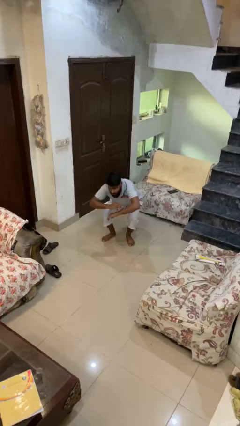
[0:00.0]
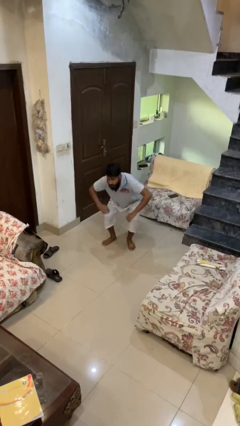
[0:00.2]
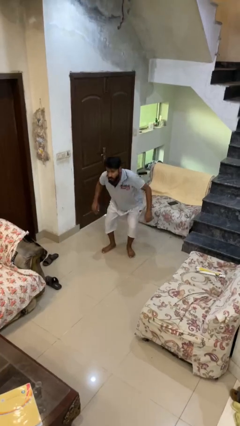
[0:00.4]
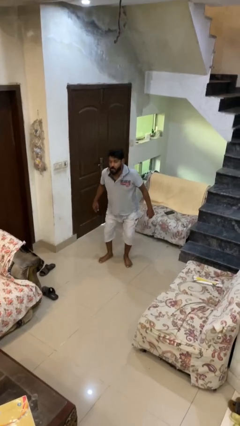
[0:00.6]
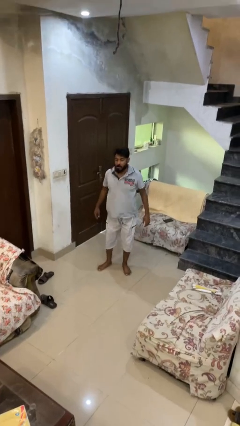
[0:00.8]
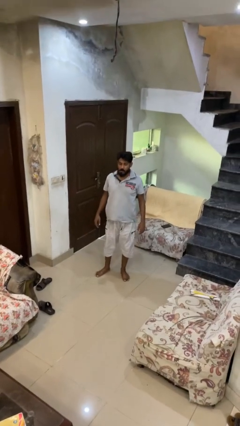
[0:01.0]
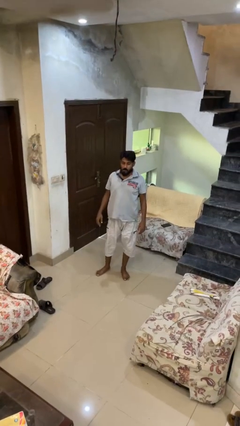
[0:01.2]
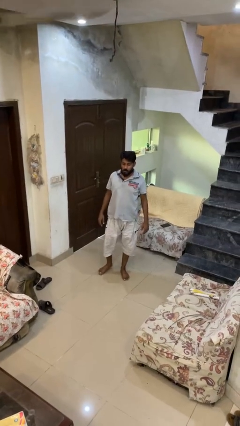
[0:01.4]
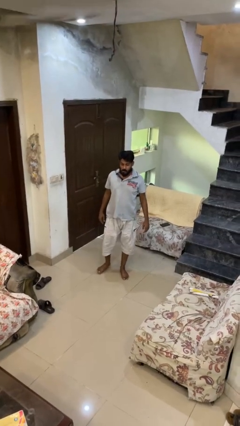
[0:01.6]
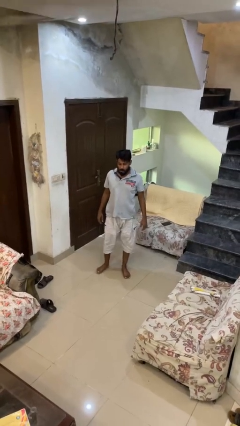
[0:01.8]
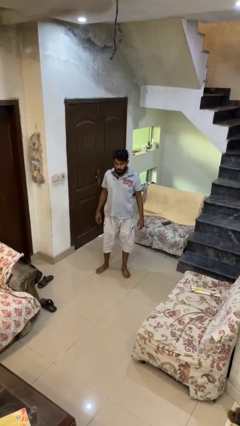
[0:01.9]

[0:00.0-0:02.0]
person stands up

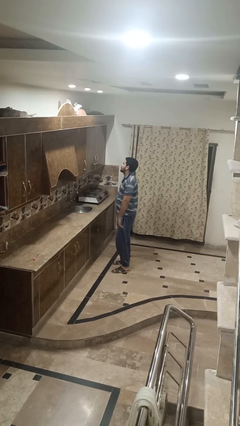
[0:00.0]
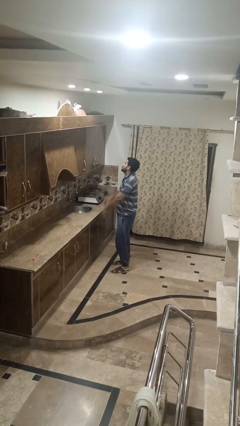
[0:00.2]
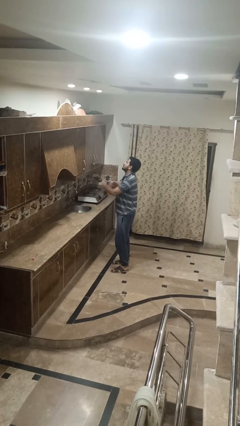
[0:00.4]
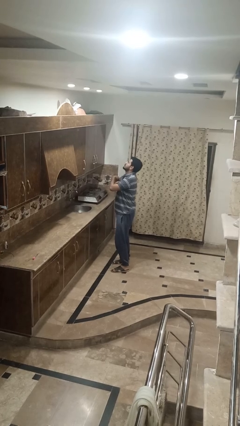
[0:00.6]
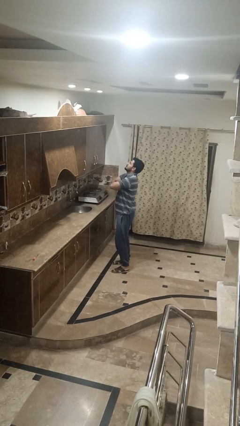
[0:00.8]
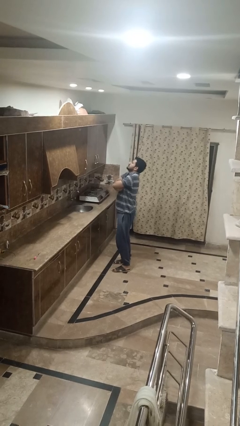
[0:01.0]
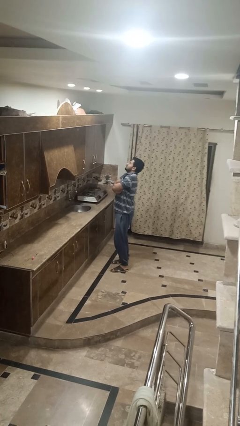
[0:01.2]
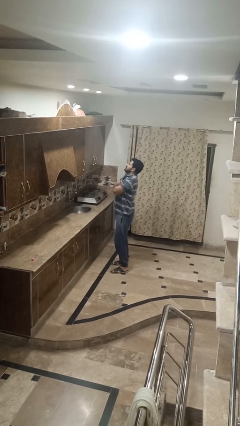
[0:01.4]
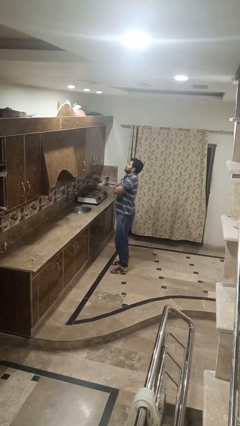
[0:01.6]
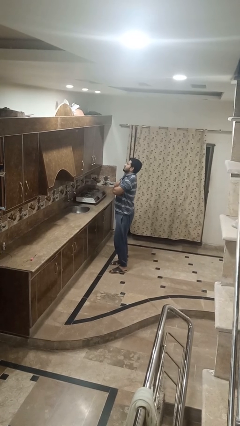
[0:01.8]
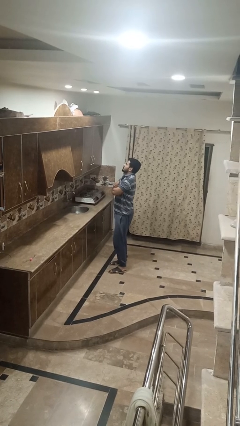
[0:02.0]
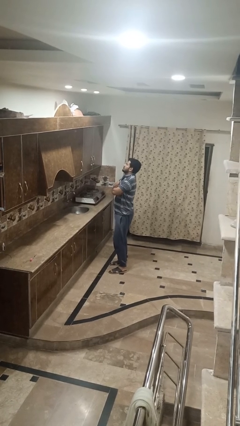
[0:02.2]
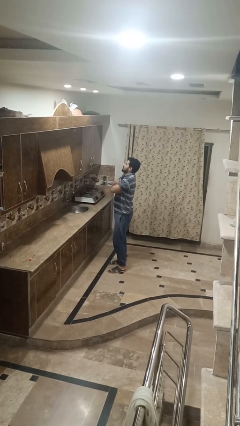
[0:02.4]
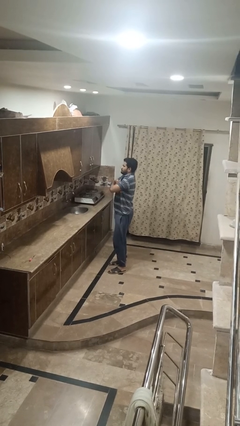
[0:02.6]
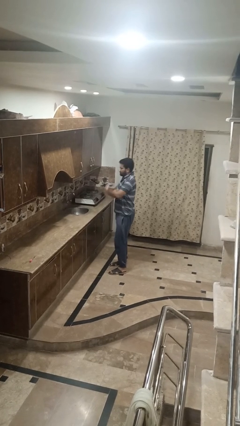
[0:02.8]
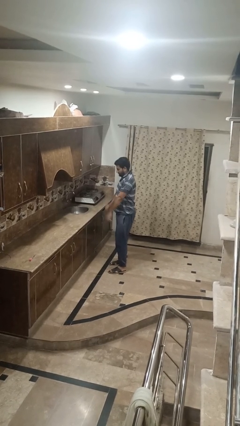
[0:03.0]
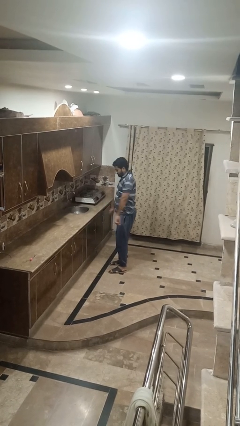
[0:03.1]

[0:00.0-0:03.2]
person crosses arms

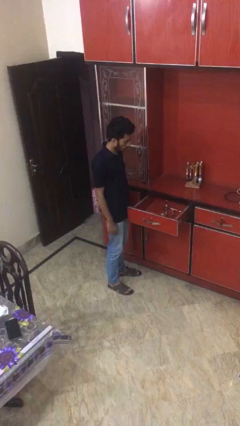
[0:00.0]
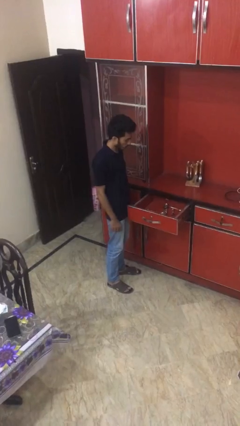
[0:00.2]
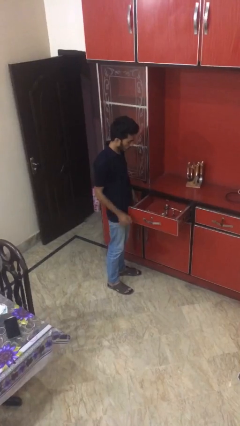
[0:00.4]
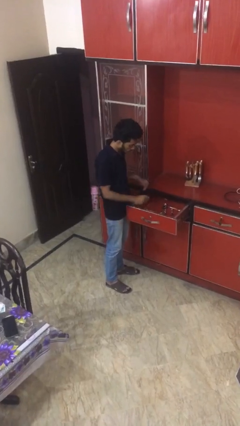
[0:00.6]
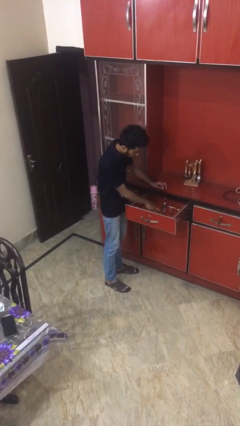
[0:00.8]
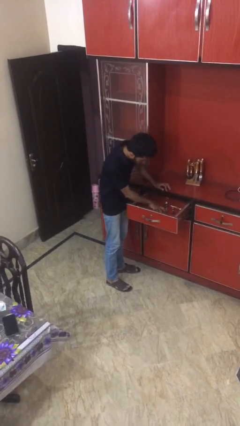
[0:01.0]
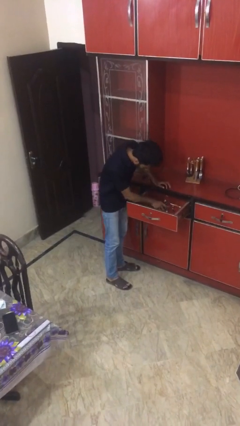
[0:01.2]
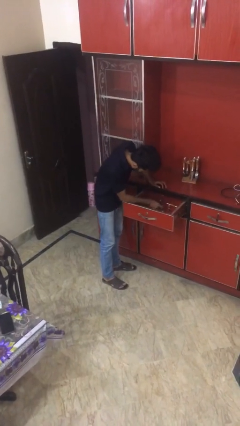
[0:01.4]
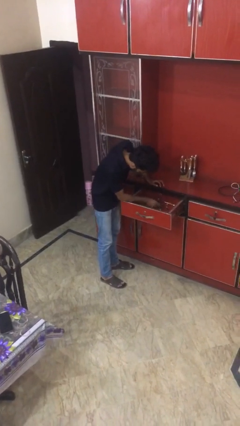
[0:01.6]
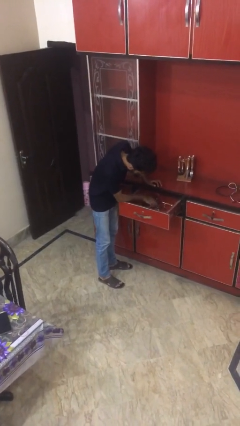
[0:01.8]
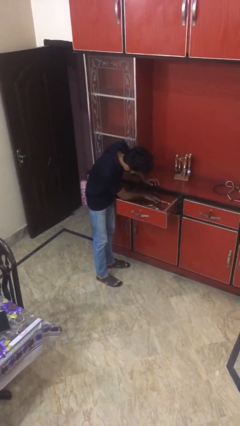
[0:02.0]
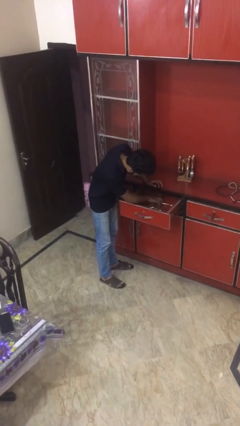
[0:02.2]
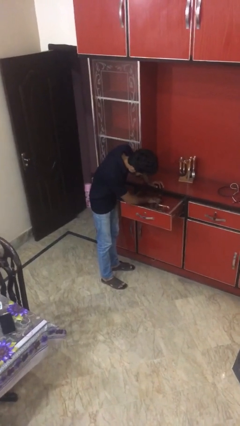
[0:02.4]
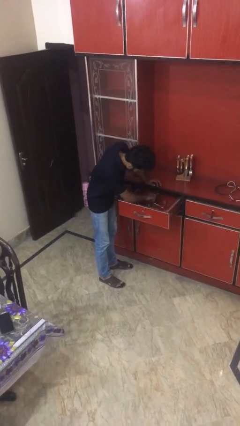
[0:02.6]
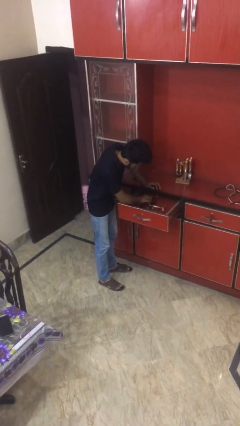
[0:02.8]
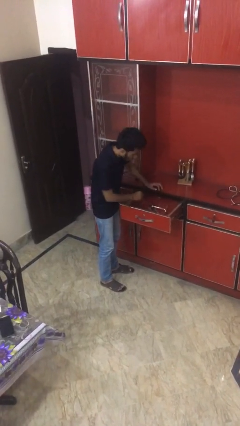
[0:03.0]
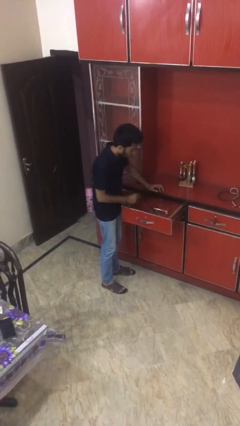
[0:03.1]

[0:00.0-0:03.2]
person searches in kitchen drawer

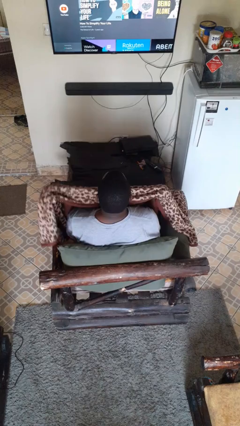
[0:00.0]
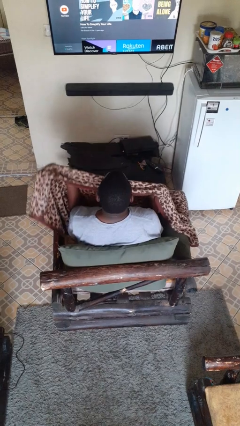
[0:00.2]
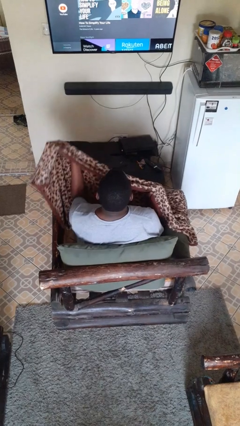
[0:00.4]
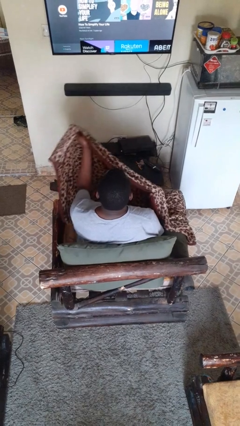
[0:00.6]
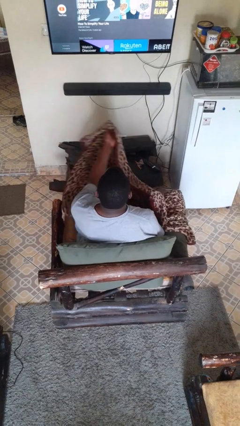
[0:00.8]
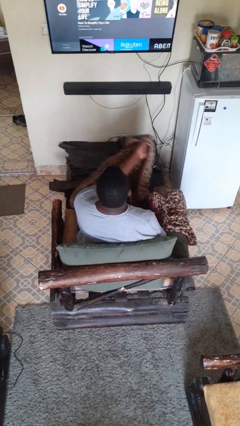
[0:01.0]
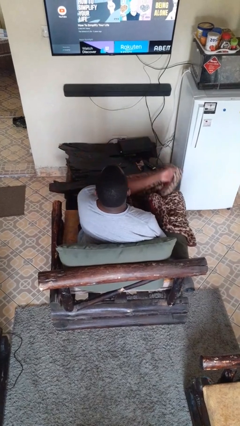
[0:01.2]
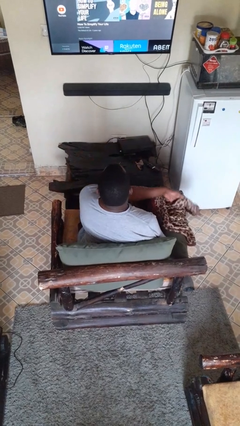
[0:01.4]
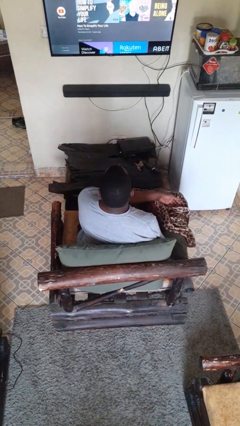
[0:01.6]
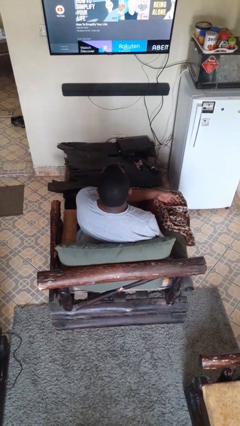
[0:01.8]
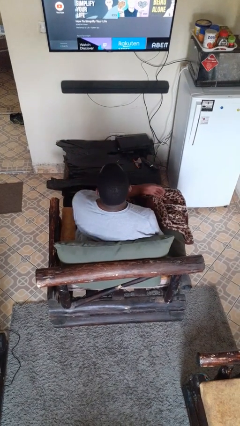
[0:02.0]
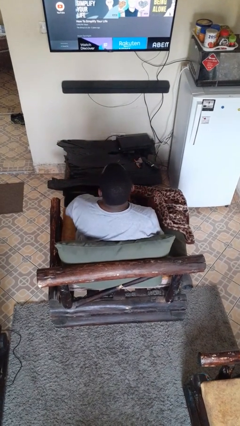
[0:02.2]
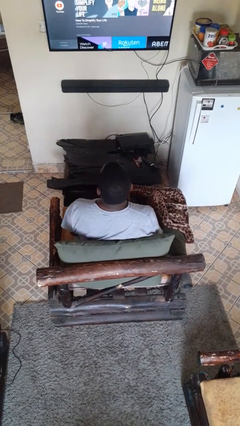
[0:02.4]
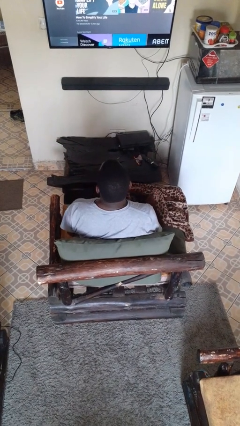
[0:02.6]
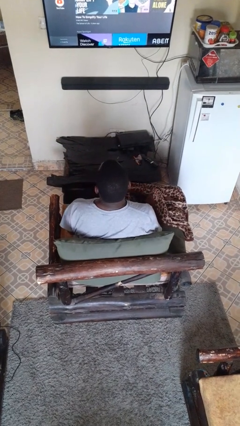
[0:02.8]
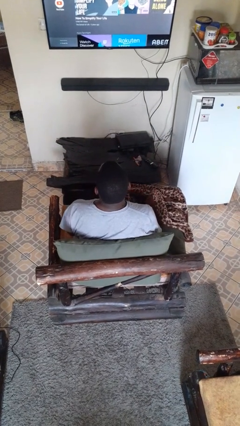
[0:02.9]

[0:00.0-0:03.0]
person uncovers with blanket

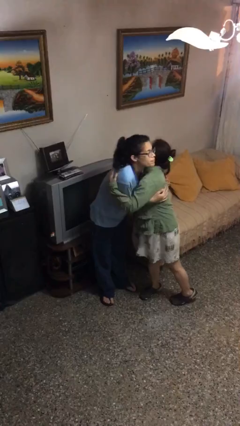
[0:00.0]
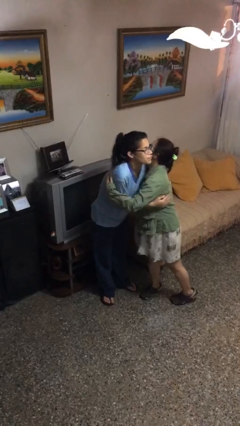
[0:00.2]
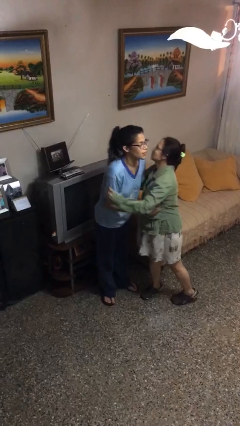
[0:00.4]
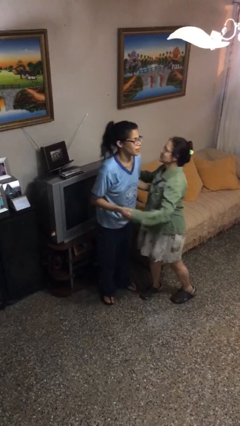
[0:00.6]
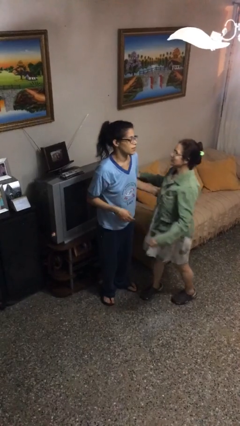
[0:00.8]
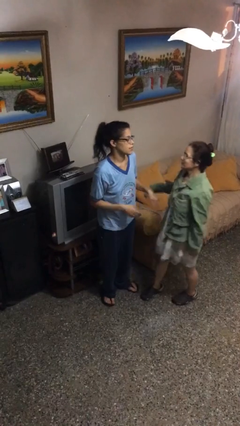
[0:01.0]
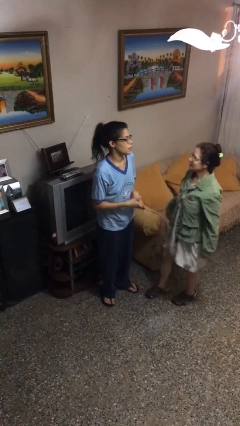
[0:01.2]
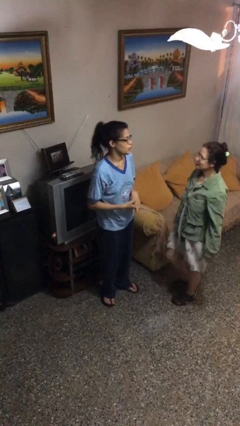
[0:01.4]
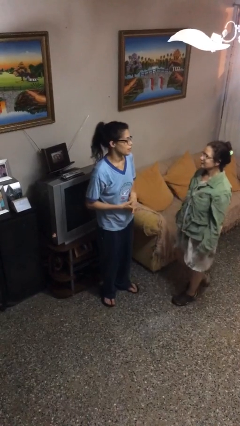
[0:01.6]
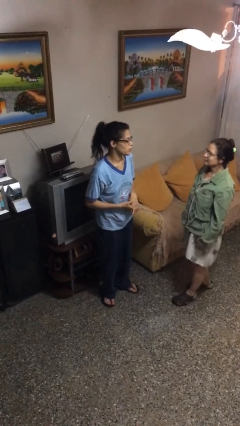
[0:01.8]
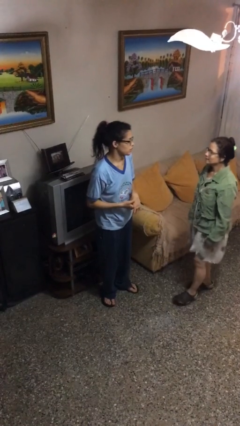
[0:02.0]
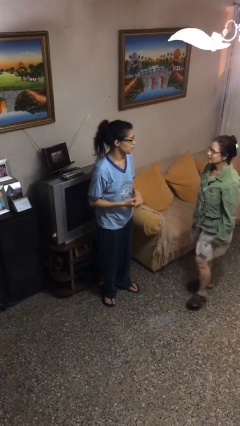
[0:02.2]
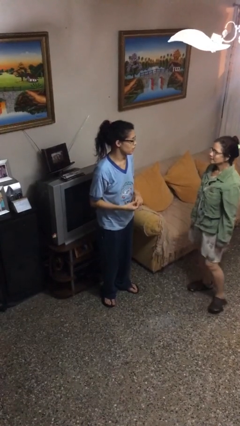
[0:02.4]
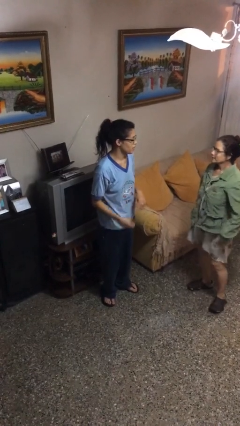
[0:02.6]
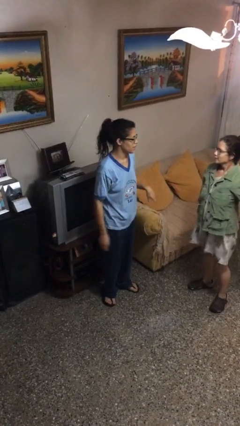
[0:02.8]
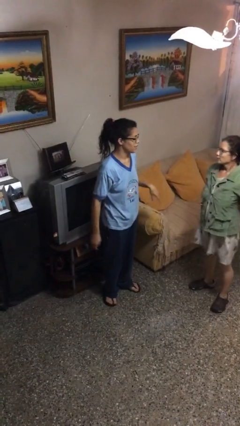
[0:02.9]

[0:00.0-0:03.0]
person talks to person

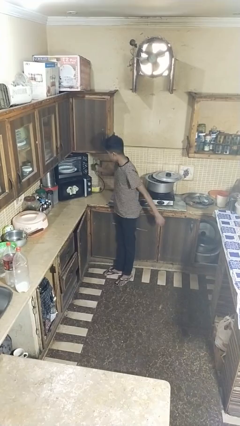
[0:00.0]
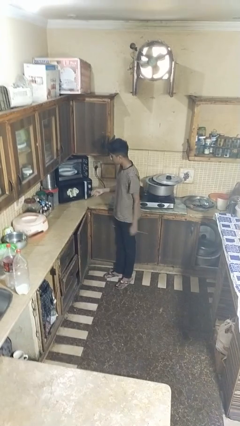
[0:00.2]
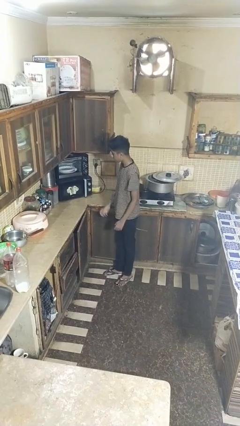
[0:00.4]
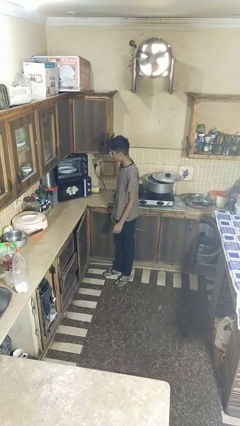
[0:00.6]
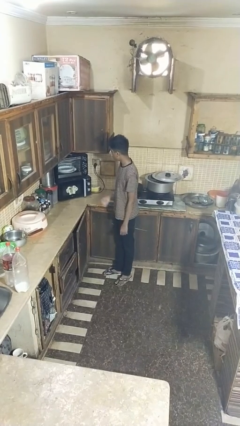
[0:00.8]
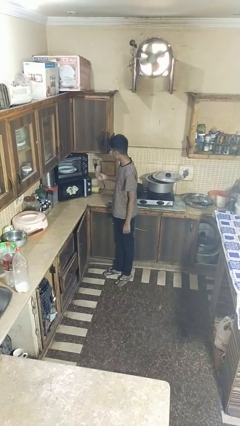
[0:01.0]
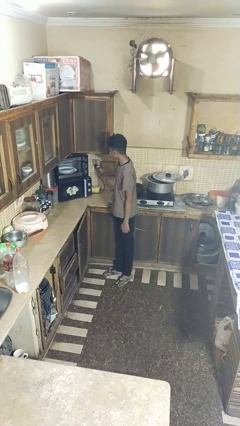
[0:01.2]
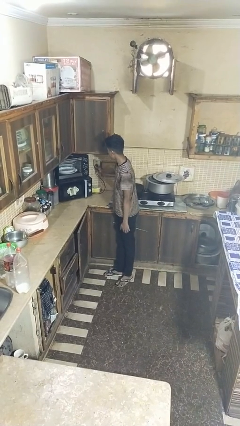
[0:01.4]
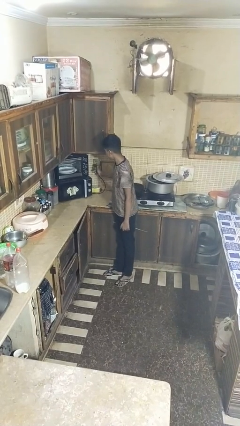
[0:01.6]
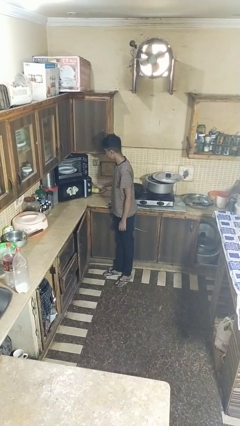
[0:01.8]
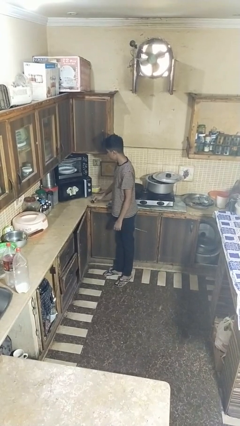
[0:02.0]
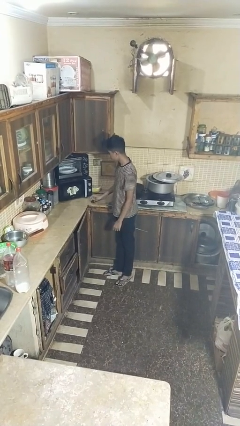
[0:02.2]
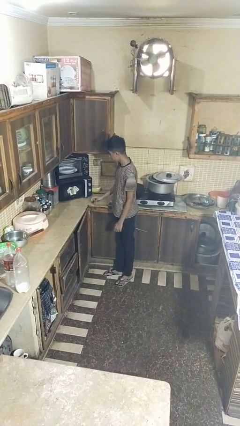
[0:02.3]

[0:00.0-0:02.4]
person unplugs from electrical socket

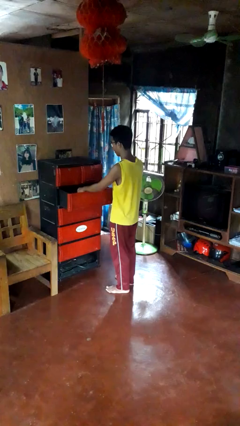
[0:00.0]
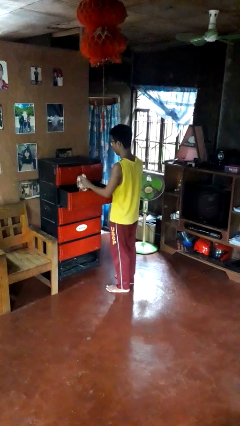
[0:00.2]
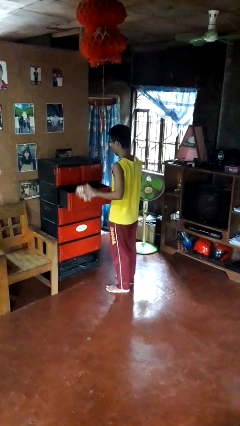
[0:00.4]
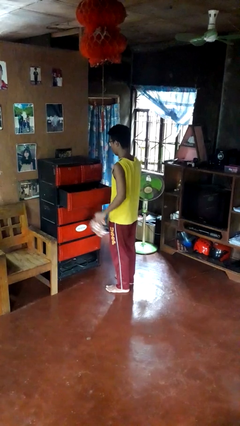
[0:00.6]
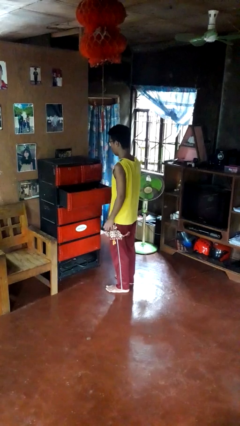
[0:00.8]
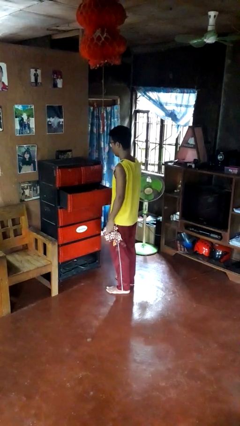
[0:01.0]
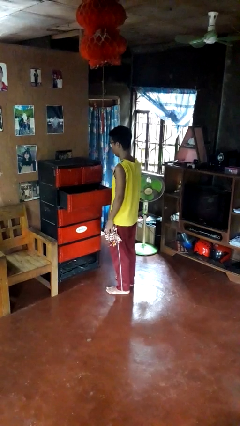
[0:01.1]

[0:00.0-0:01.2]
person takes clothes from dresser
